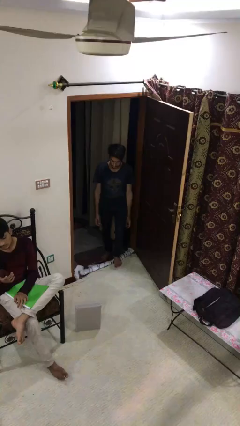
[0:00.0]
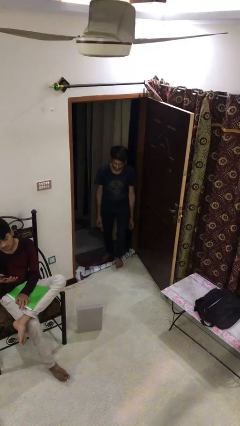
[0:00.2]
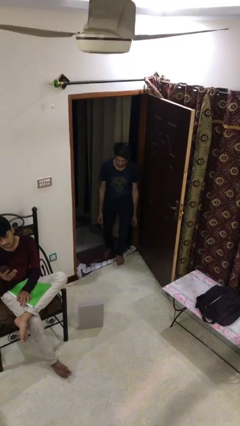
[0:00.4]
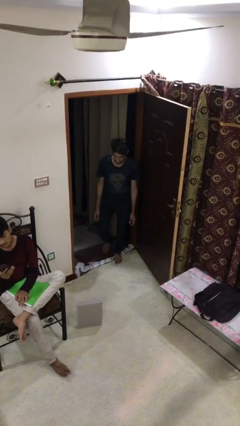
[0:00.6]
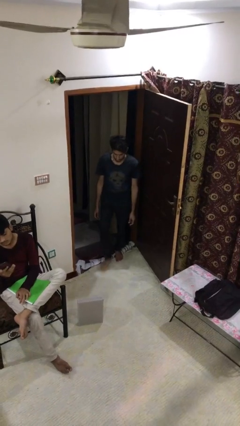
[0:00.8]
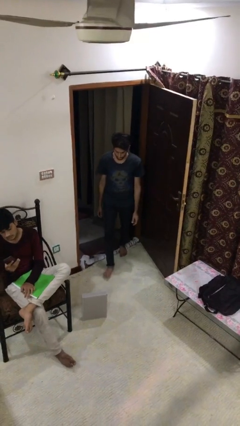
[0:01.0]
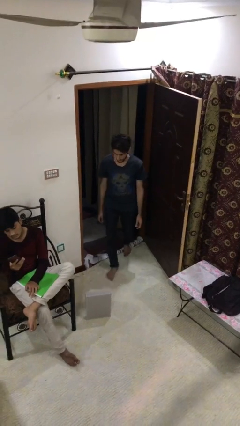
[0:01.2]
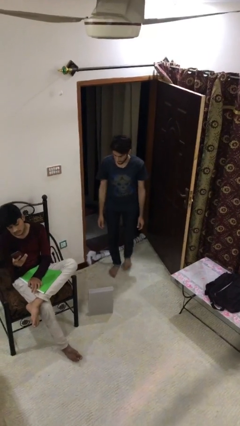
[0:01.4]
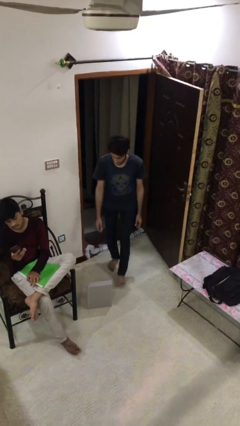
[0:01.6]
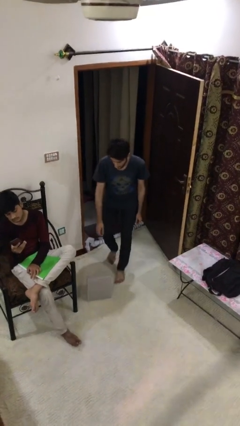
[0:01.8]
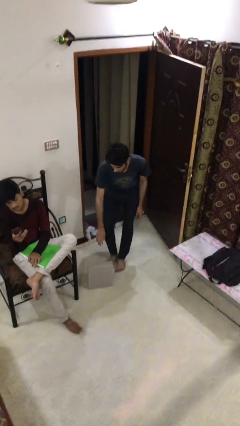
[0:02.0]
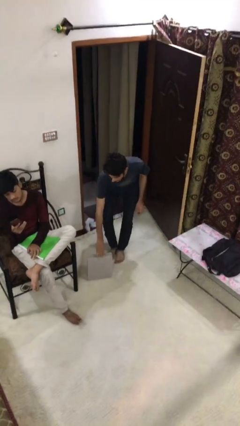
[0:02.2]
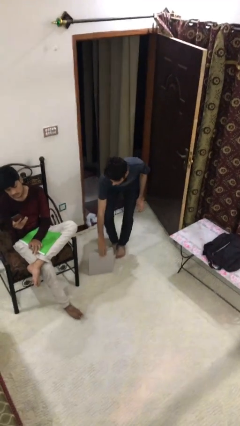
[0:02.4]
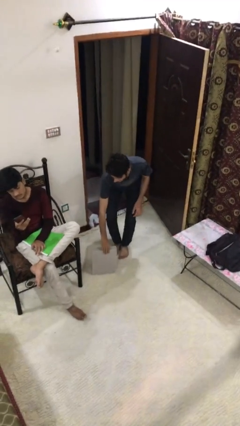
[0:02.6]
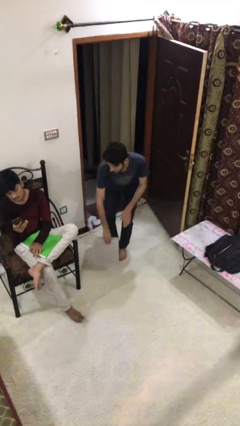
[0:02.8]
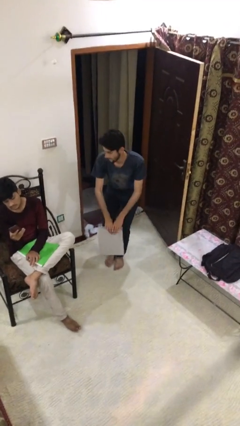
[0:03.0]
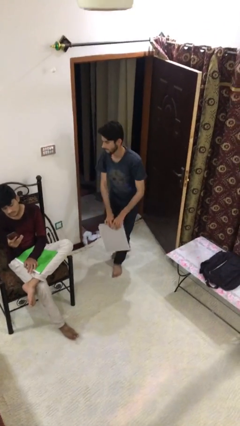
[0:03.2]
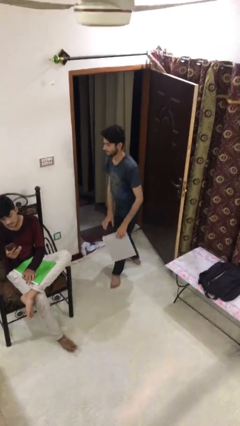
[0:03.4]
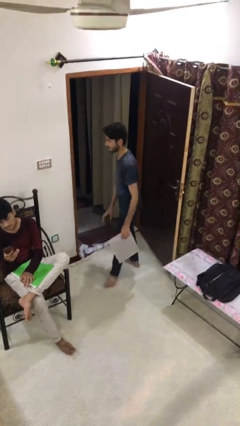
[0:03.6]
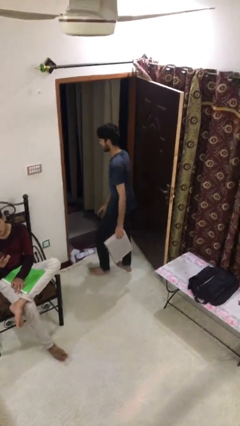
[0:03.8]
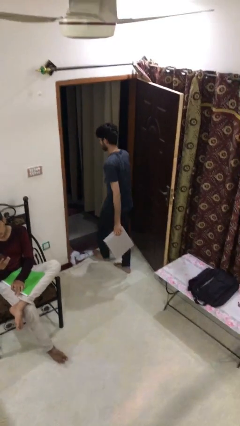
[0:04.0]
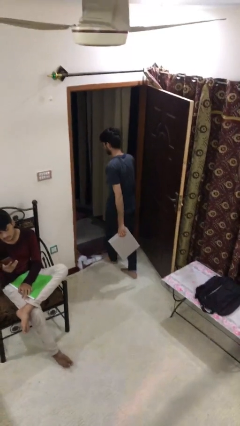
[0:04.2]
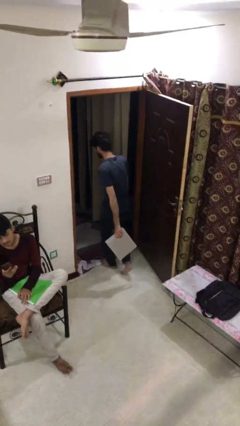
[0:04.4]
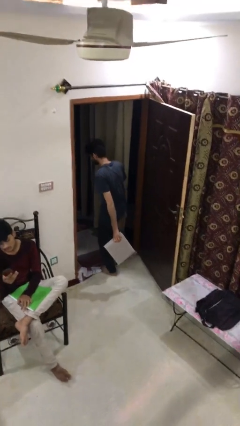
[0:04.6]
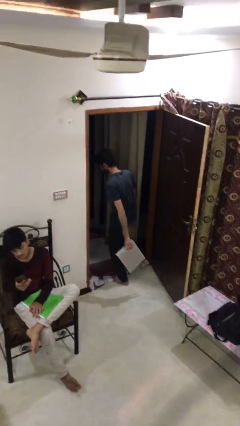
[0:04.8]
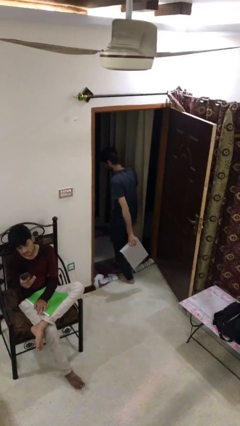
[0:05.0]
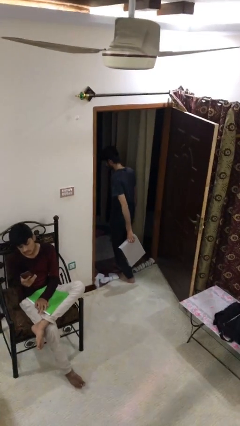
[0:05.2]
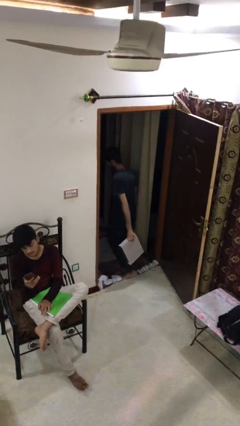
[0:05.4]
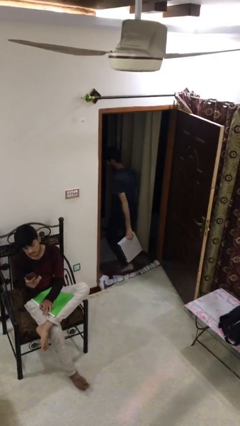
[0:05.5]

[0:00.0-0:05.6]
person steals object from person

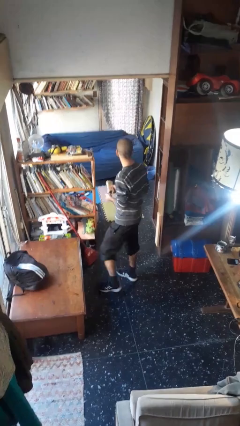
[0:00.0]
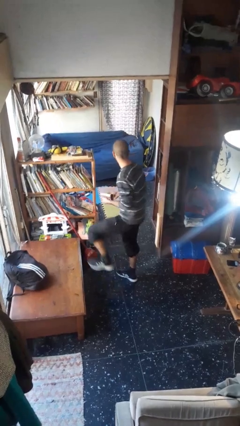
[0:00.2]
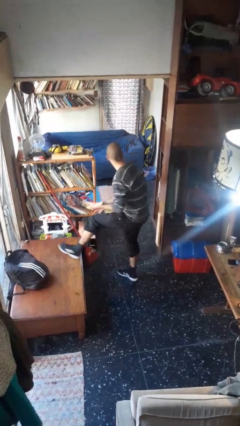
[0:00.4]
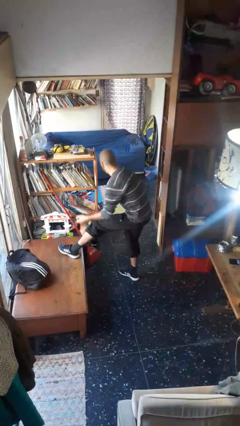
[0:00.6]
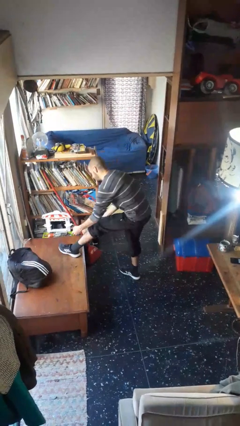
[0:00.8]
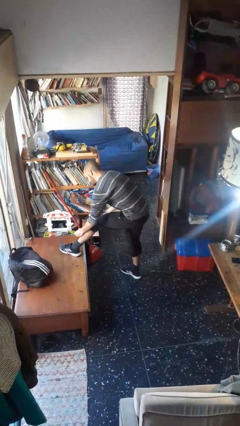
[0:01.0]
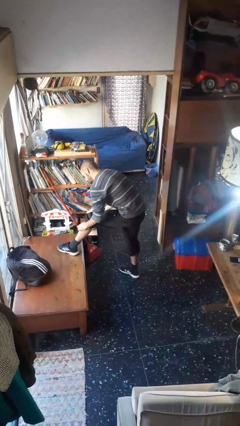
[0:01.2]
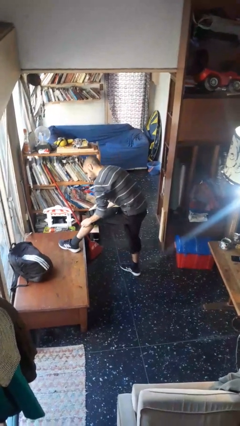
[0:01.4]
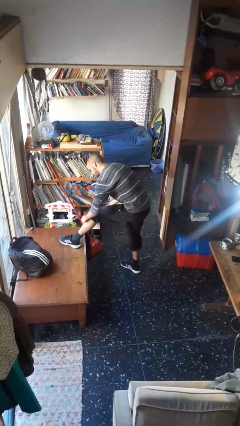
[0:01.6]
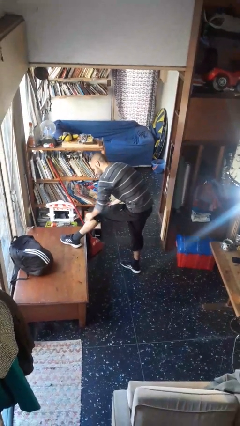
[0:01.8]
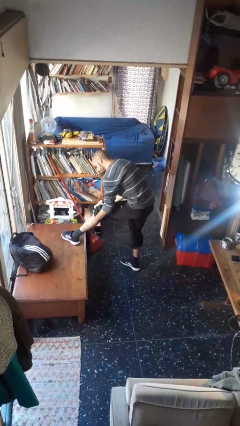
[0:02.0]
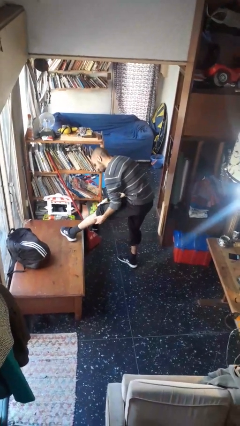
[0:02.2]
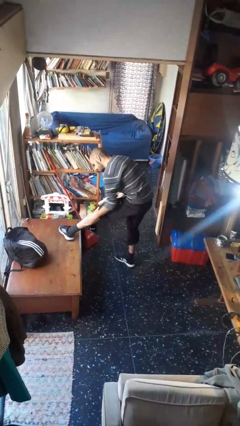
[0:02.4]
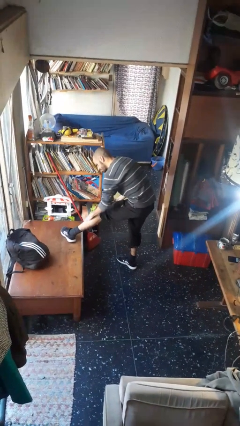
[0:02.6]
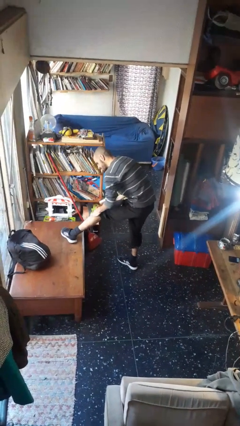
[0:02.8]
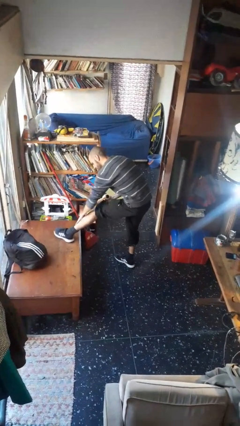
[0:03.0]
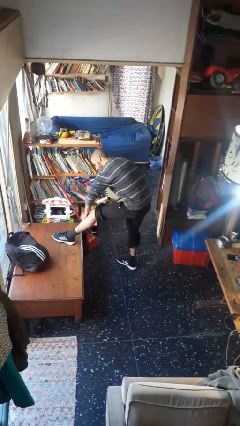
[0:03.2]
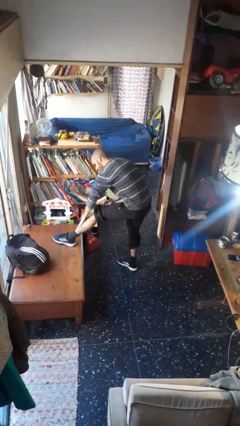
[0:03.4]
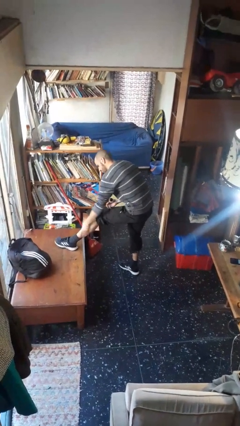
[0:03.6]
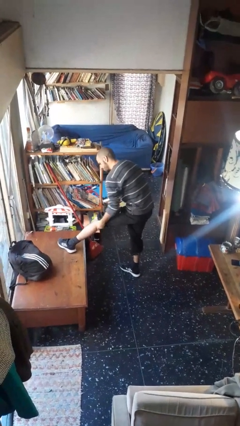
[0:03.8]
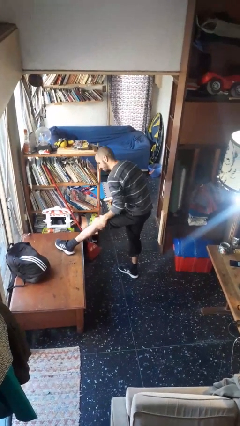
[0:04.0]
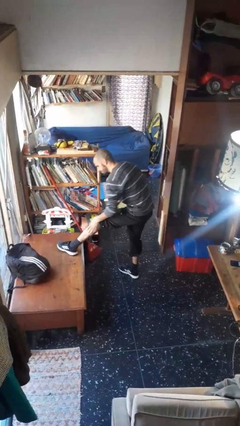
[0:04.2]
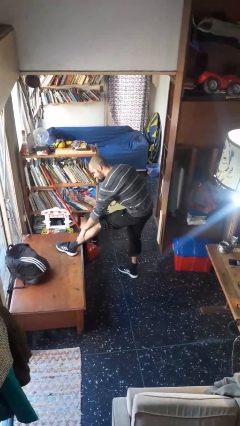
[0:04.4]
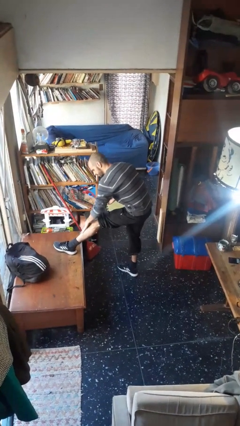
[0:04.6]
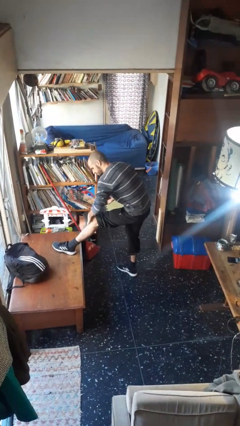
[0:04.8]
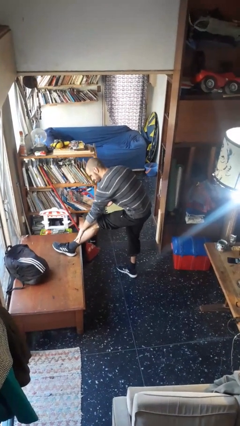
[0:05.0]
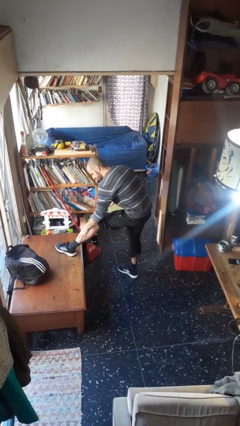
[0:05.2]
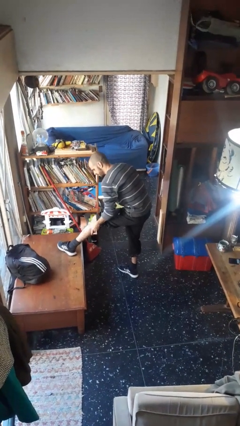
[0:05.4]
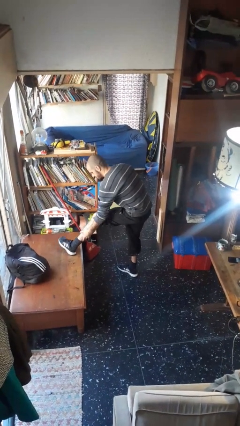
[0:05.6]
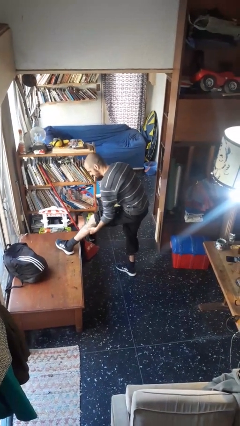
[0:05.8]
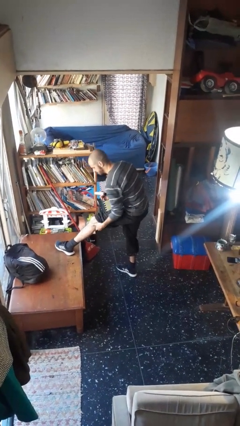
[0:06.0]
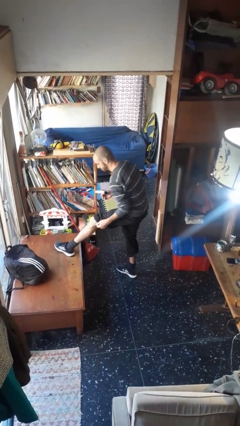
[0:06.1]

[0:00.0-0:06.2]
person applies sunscreen

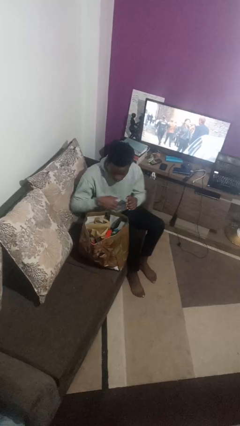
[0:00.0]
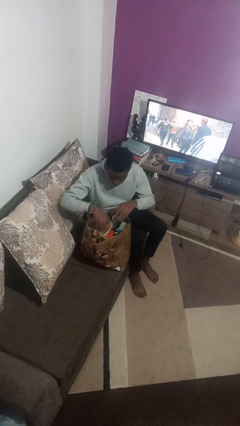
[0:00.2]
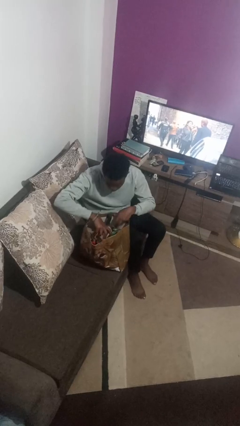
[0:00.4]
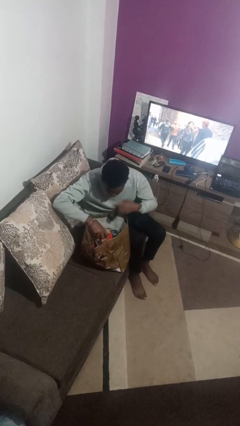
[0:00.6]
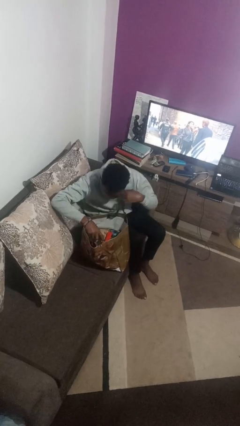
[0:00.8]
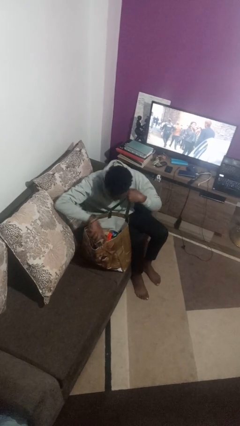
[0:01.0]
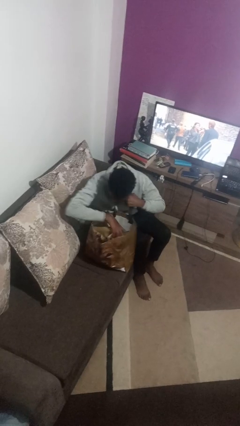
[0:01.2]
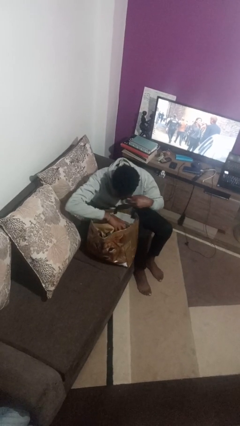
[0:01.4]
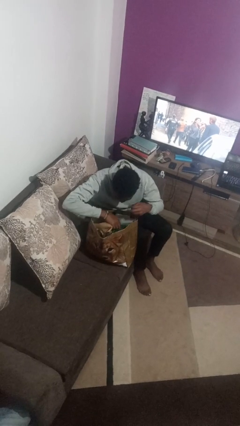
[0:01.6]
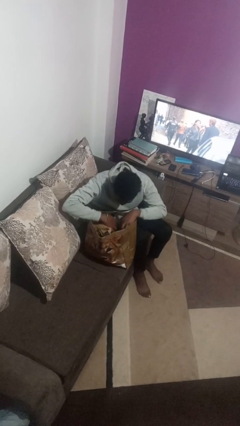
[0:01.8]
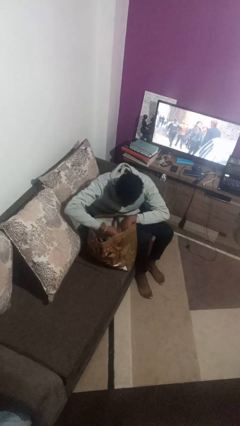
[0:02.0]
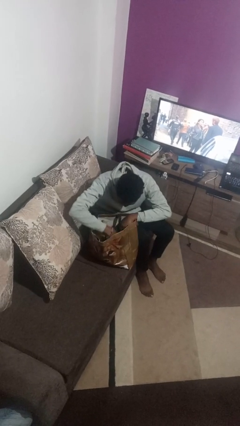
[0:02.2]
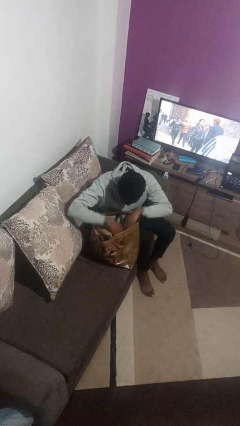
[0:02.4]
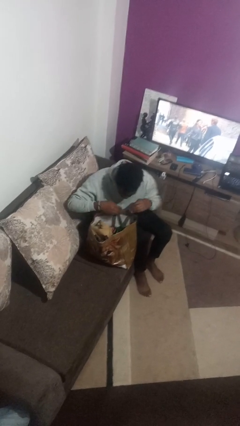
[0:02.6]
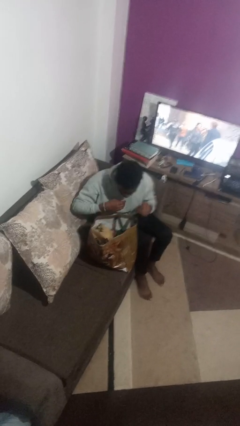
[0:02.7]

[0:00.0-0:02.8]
person searches in bag

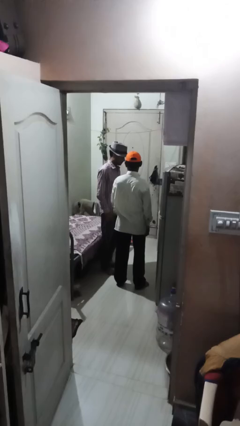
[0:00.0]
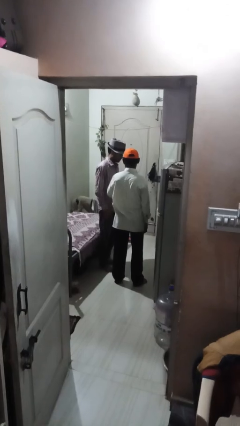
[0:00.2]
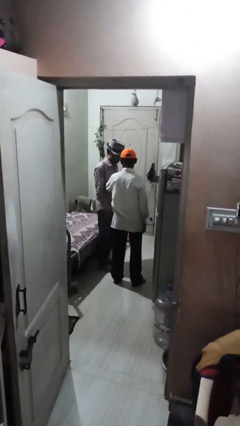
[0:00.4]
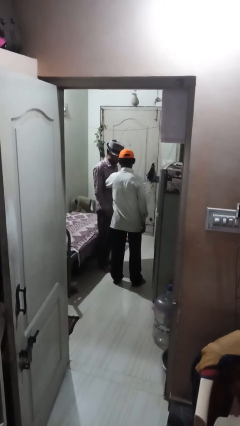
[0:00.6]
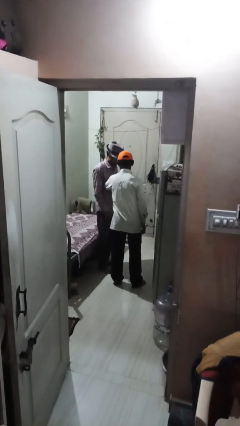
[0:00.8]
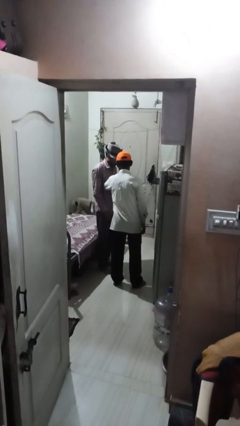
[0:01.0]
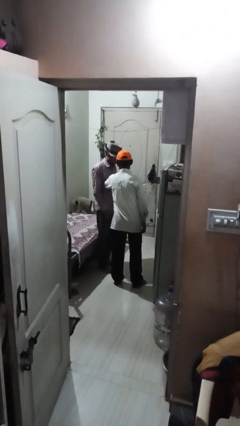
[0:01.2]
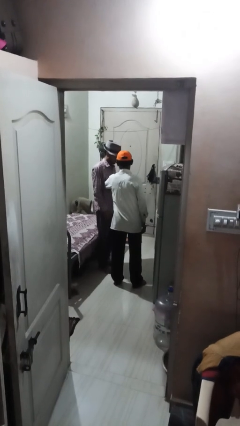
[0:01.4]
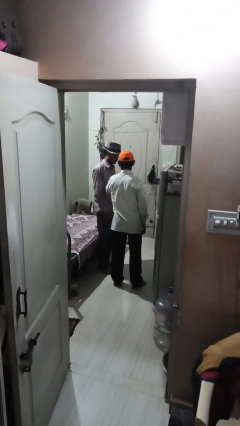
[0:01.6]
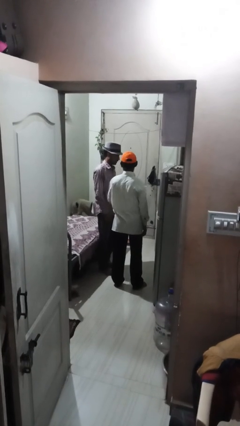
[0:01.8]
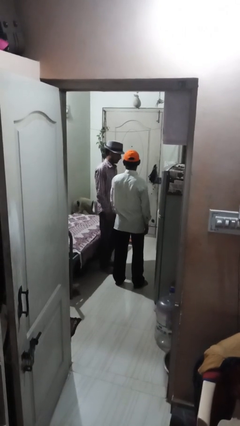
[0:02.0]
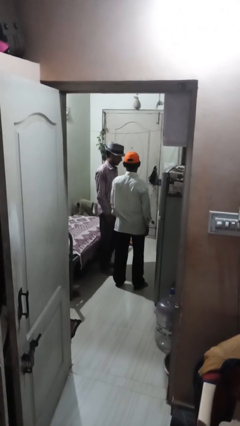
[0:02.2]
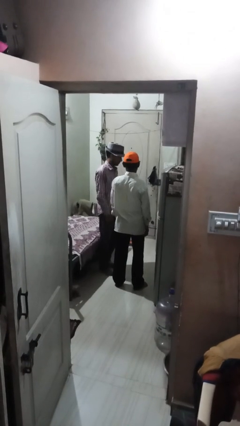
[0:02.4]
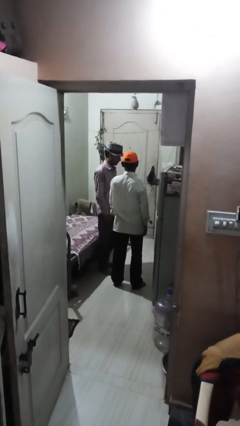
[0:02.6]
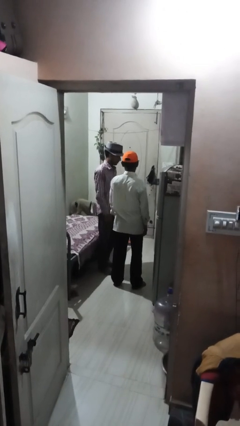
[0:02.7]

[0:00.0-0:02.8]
person nudges person with elbow

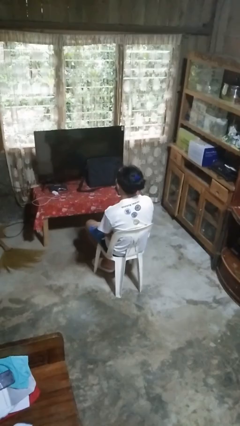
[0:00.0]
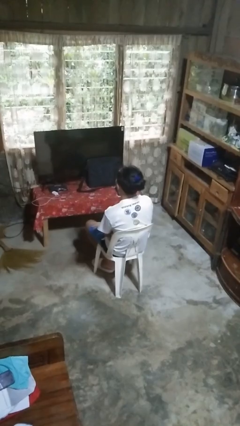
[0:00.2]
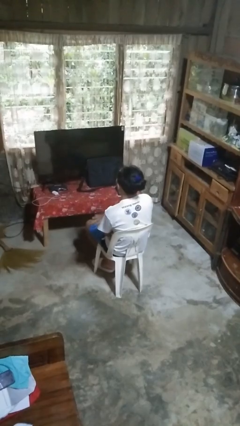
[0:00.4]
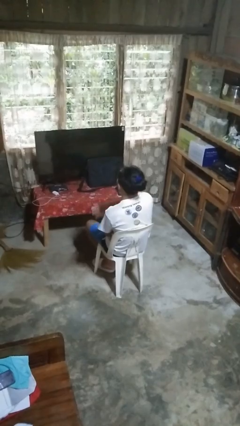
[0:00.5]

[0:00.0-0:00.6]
person gestures swipe up
